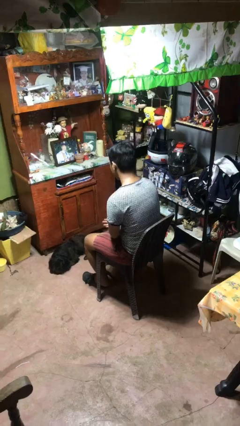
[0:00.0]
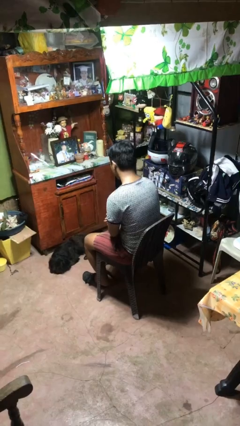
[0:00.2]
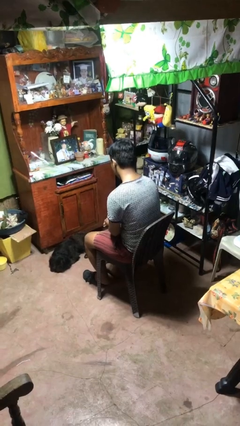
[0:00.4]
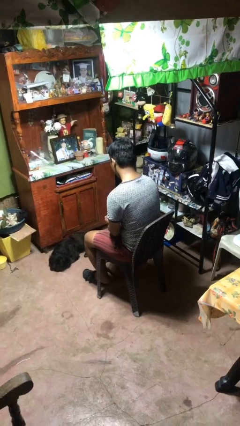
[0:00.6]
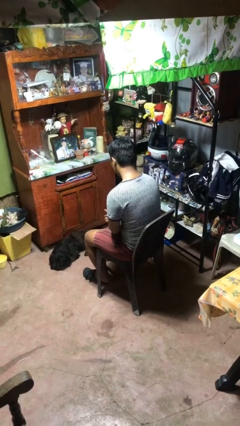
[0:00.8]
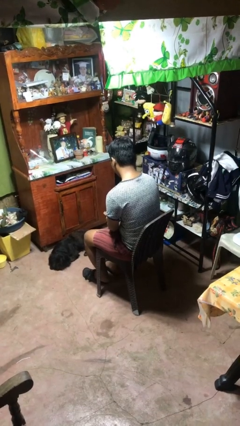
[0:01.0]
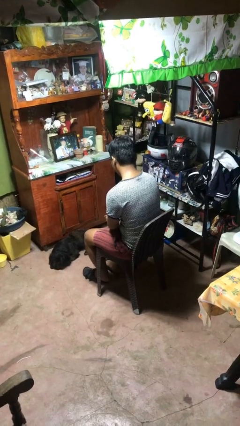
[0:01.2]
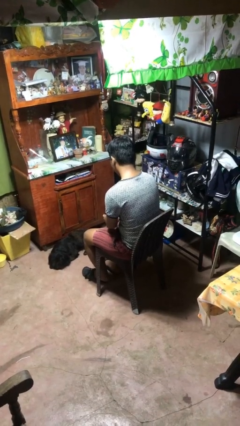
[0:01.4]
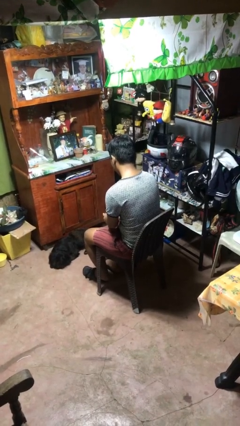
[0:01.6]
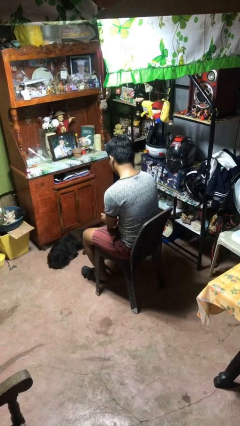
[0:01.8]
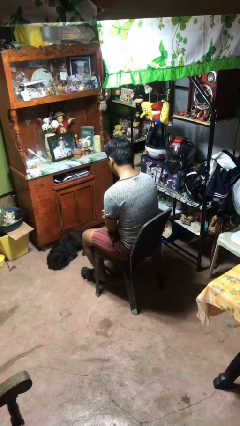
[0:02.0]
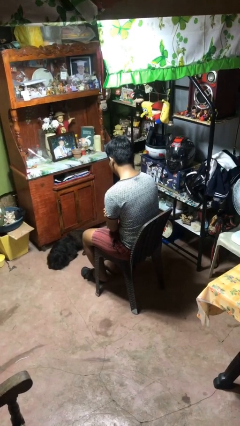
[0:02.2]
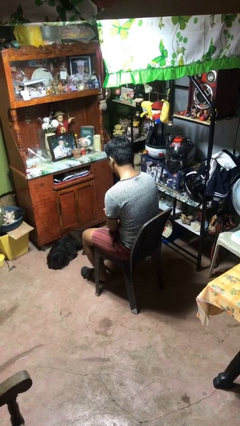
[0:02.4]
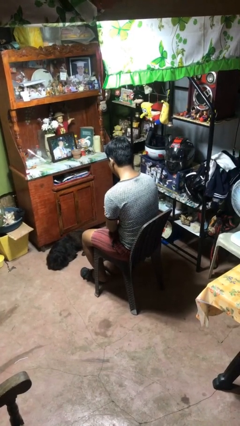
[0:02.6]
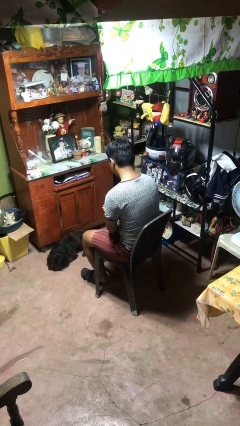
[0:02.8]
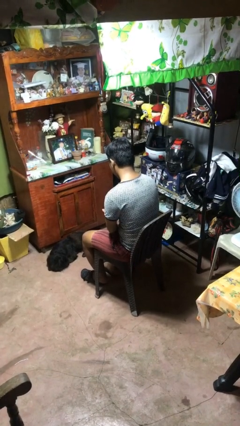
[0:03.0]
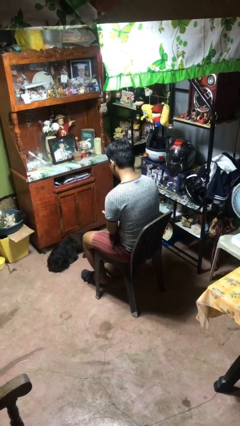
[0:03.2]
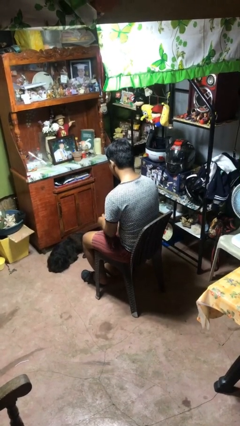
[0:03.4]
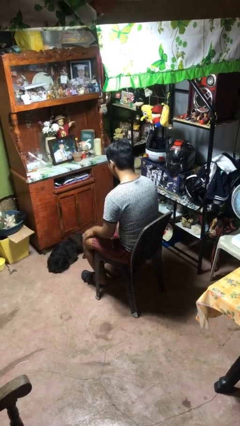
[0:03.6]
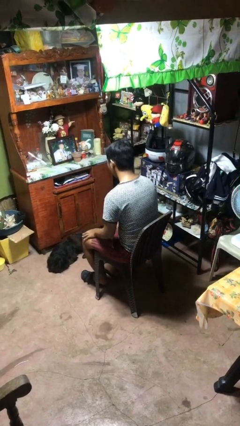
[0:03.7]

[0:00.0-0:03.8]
person looks at hands in lap

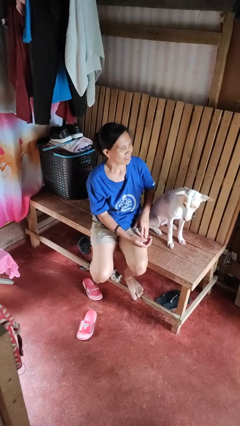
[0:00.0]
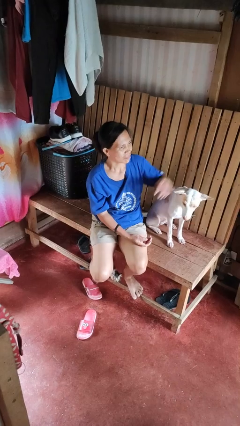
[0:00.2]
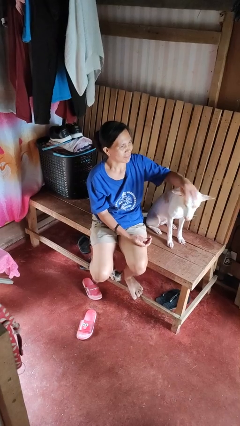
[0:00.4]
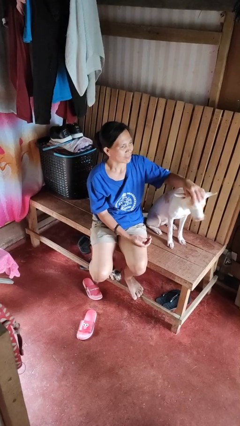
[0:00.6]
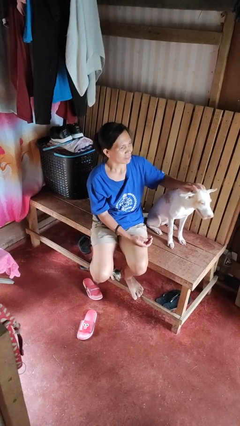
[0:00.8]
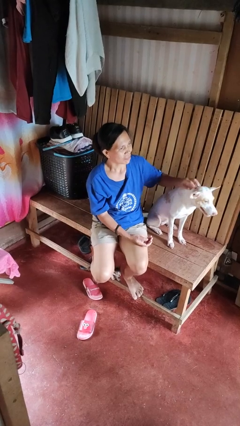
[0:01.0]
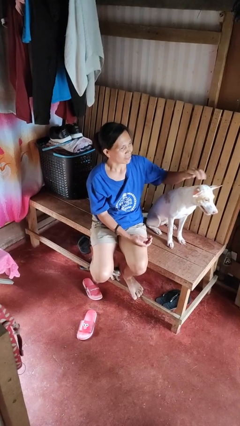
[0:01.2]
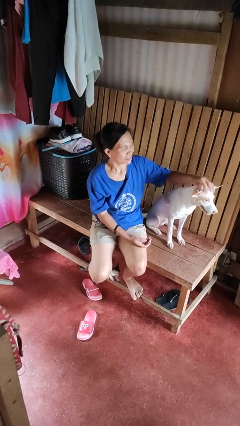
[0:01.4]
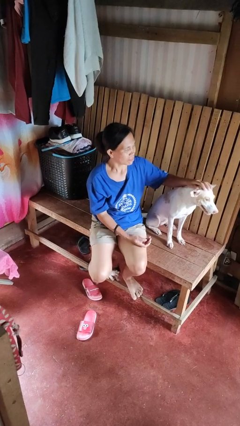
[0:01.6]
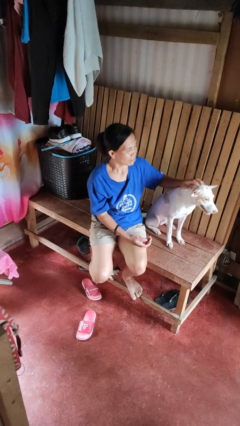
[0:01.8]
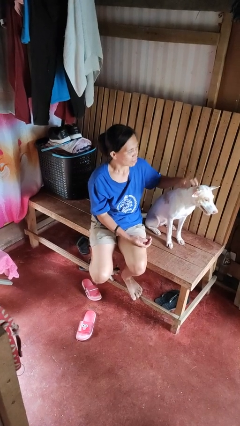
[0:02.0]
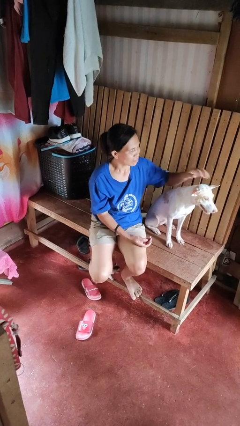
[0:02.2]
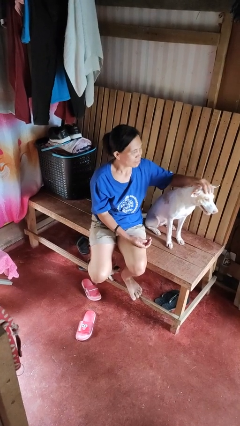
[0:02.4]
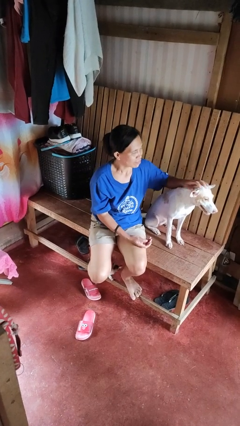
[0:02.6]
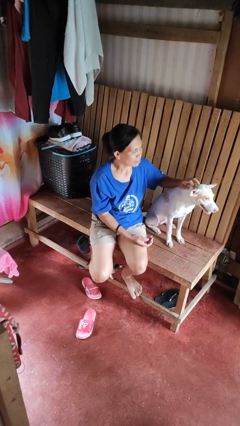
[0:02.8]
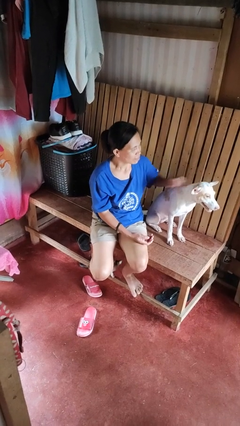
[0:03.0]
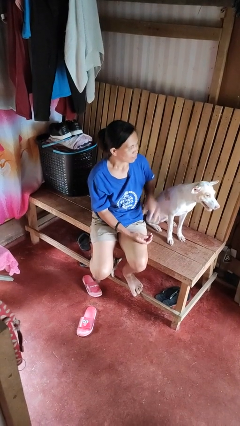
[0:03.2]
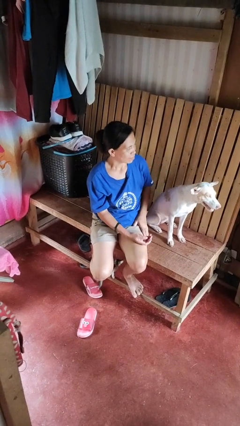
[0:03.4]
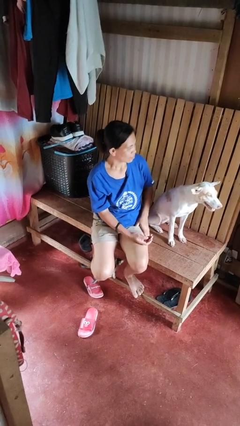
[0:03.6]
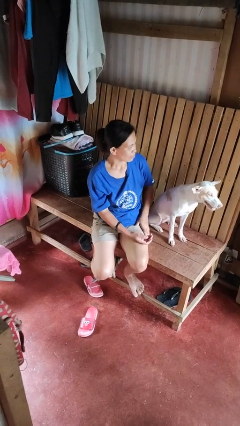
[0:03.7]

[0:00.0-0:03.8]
person pets dog

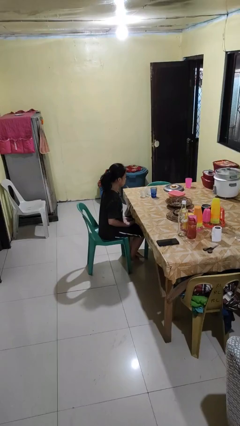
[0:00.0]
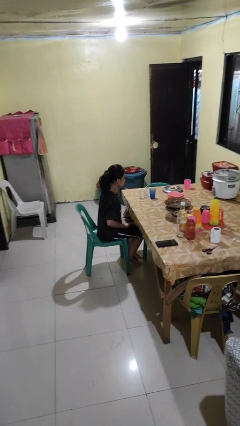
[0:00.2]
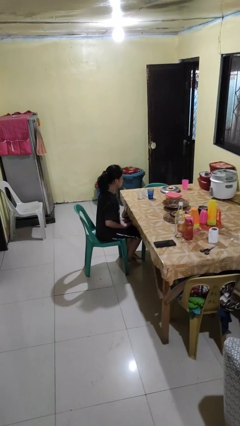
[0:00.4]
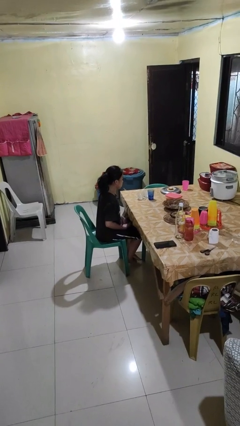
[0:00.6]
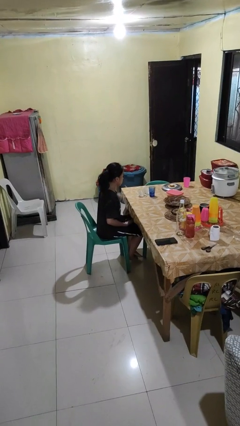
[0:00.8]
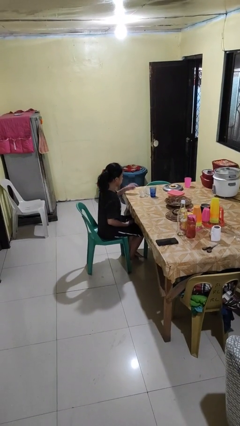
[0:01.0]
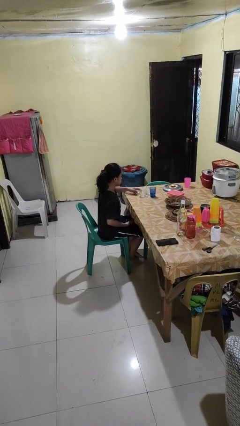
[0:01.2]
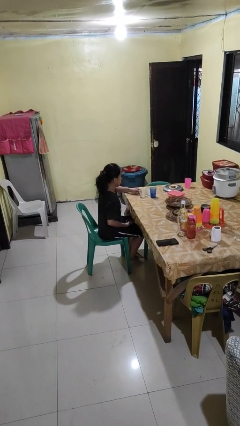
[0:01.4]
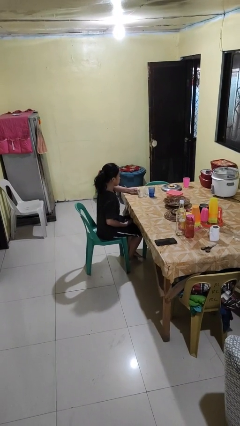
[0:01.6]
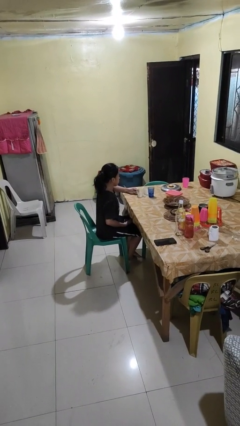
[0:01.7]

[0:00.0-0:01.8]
person picks up object from table

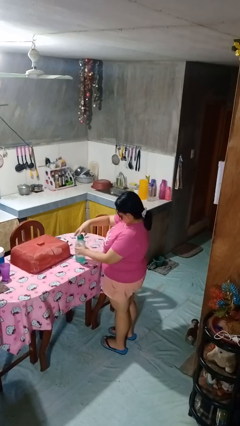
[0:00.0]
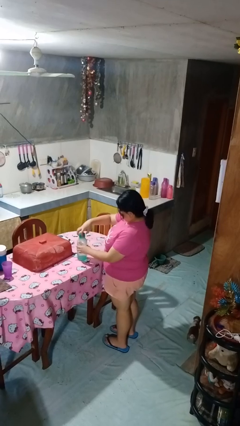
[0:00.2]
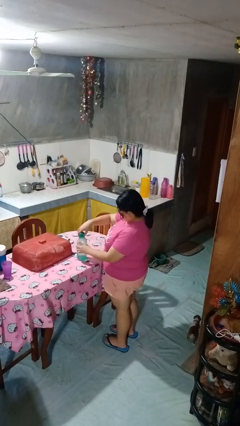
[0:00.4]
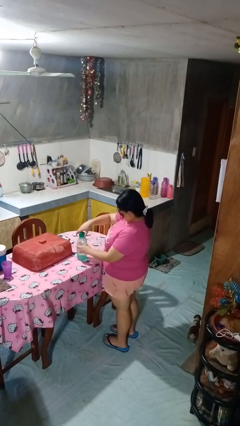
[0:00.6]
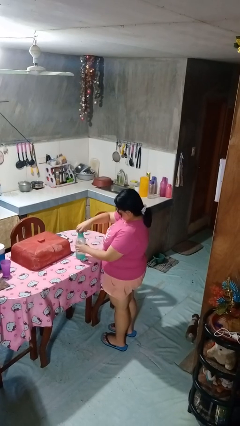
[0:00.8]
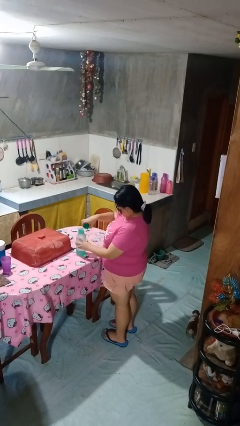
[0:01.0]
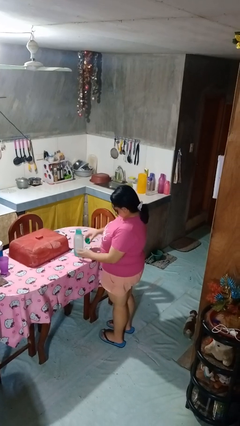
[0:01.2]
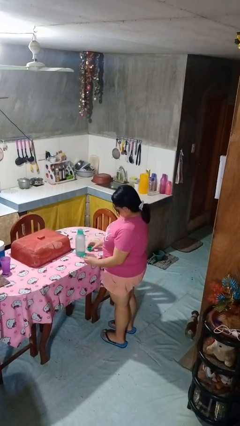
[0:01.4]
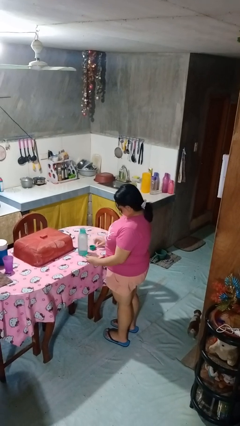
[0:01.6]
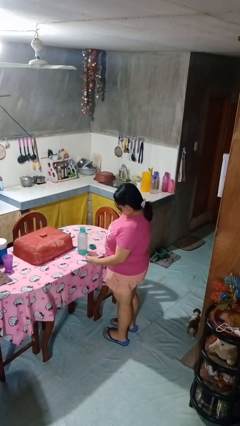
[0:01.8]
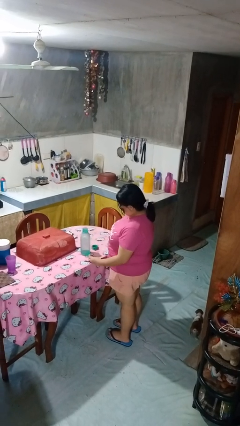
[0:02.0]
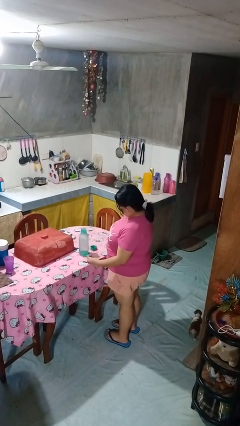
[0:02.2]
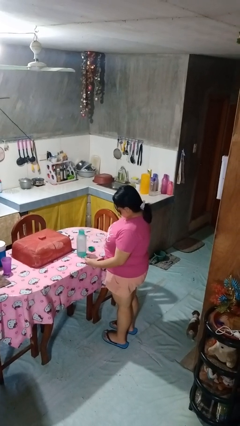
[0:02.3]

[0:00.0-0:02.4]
person unscrews lid from bottle

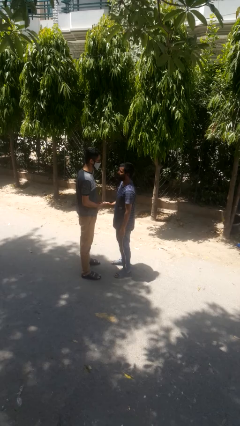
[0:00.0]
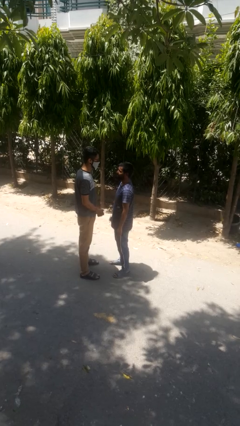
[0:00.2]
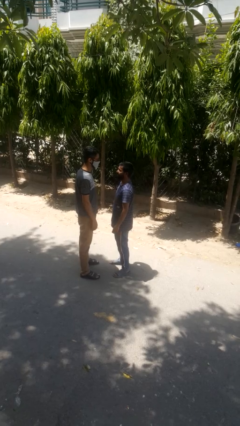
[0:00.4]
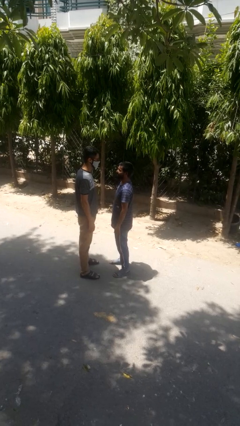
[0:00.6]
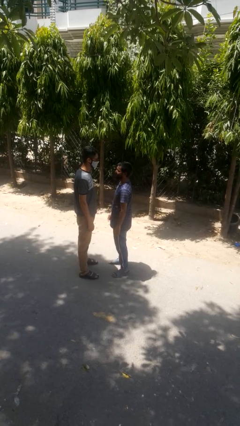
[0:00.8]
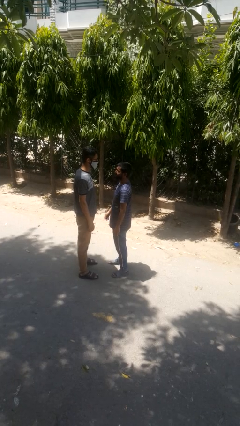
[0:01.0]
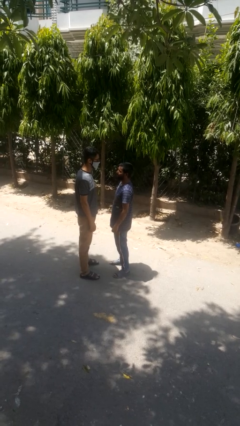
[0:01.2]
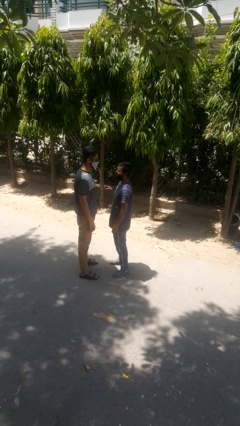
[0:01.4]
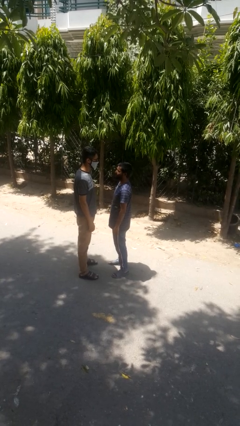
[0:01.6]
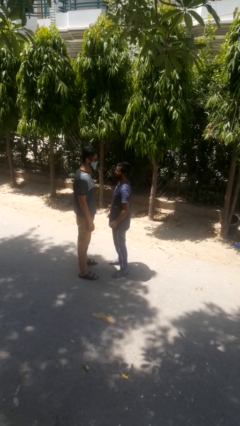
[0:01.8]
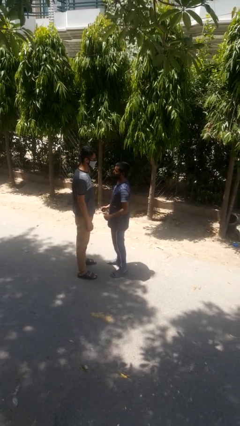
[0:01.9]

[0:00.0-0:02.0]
person highfives hand

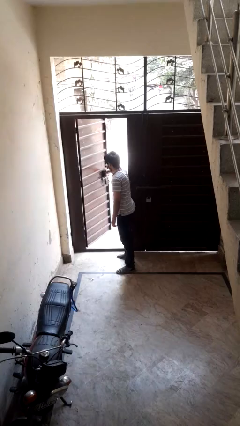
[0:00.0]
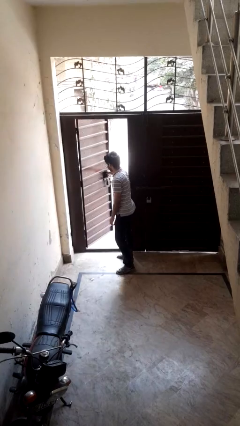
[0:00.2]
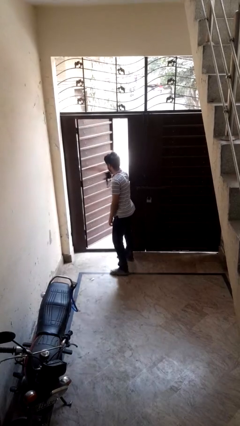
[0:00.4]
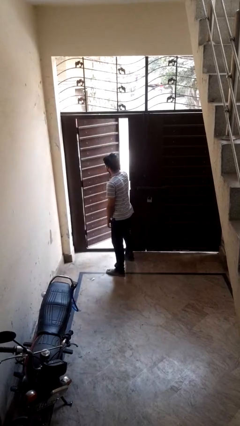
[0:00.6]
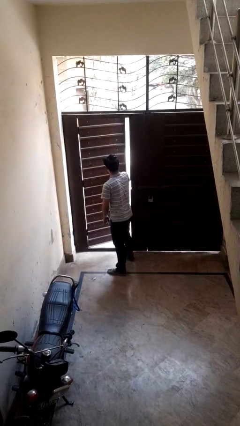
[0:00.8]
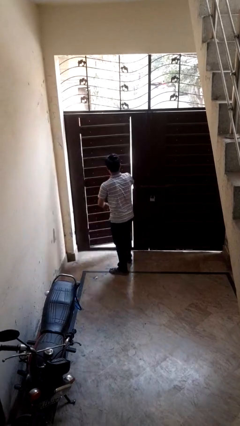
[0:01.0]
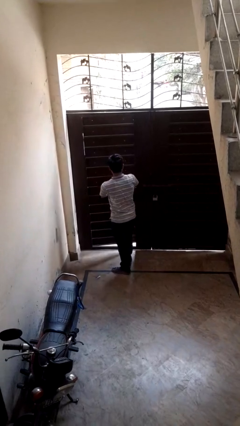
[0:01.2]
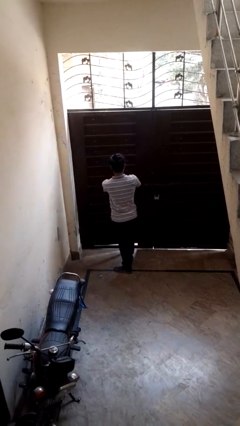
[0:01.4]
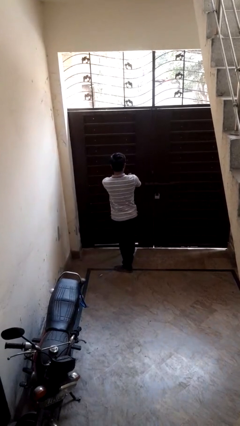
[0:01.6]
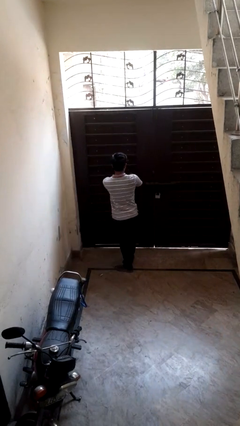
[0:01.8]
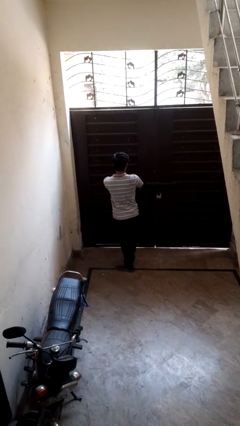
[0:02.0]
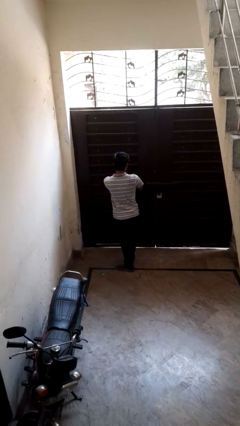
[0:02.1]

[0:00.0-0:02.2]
person closes facility door

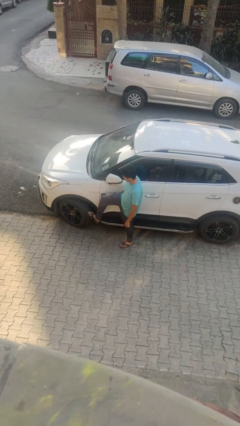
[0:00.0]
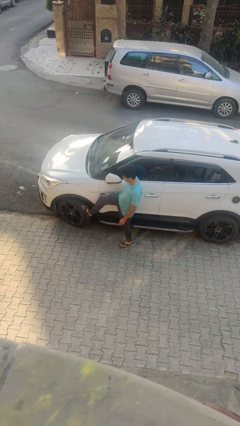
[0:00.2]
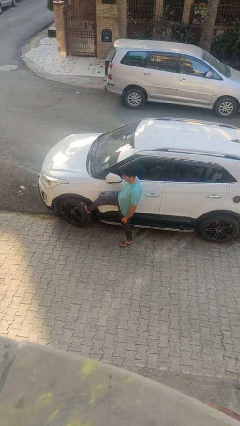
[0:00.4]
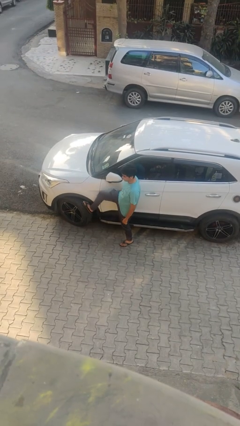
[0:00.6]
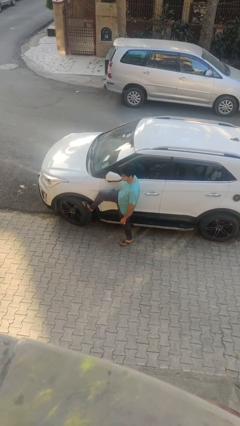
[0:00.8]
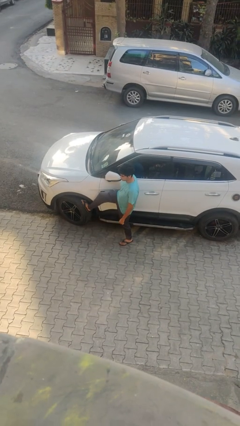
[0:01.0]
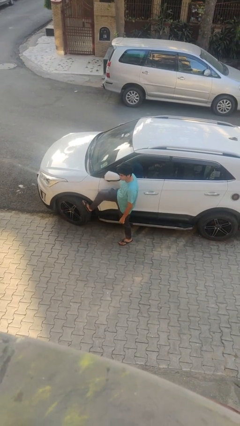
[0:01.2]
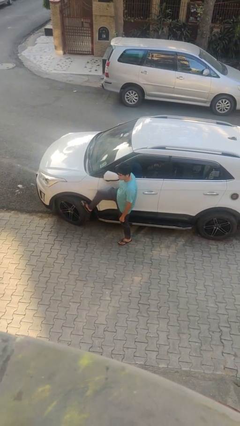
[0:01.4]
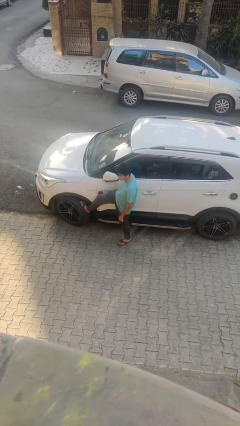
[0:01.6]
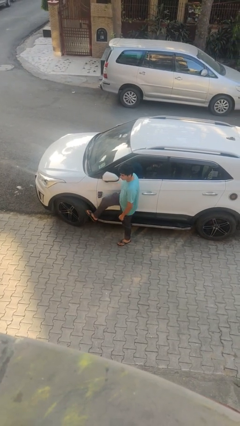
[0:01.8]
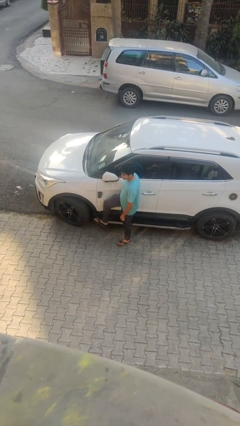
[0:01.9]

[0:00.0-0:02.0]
person kicks car tires
